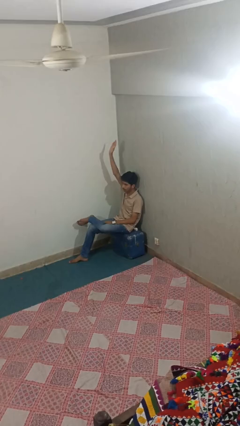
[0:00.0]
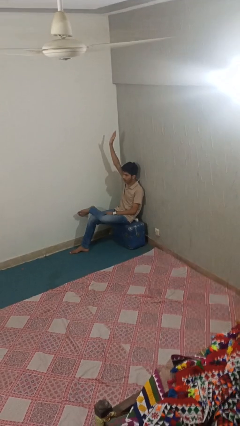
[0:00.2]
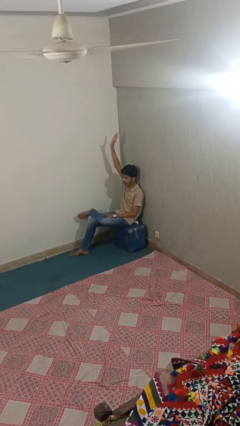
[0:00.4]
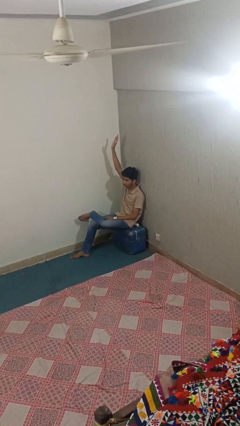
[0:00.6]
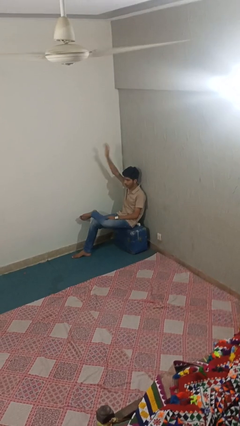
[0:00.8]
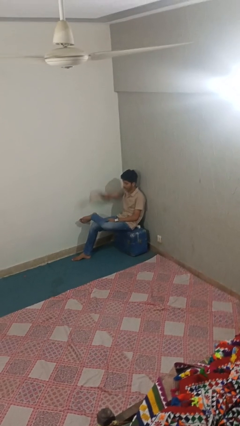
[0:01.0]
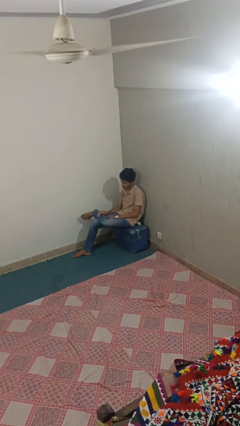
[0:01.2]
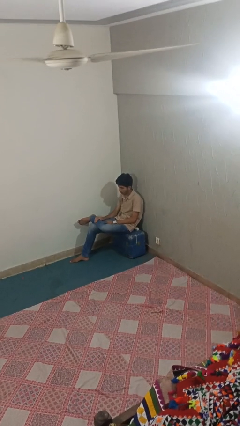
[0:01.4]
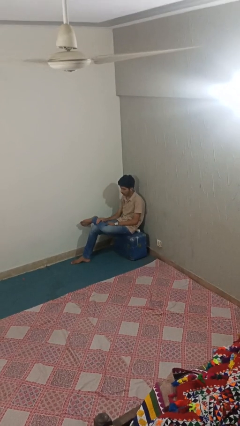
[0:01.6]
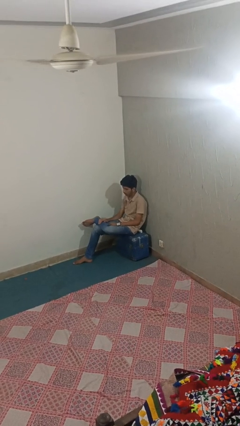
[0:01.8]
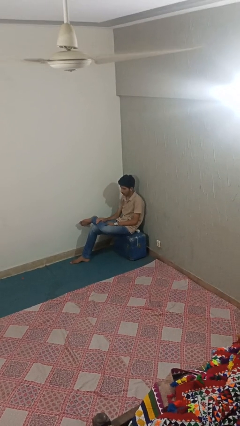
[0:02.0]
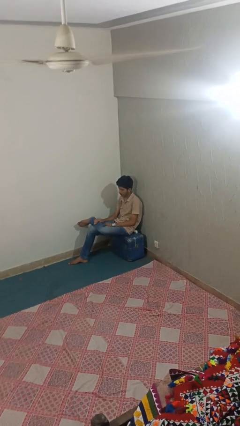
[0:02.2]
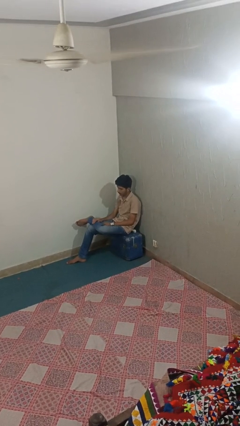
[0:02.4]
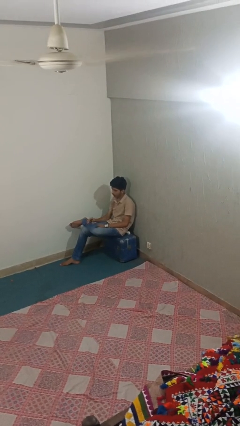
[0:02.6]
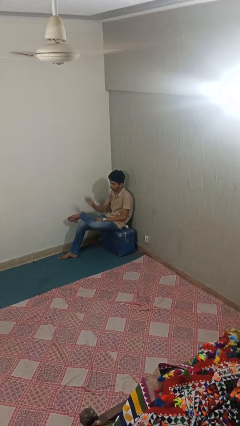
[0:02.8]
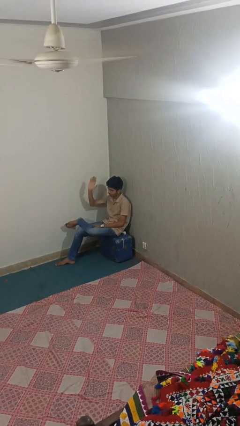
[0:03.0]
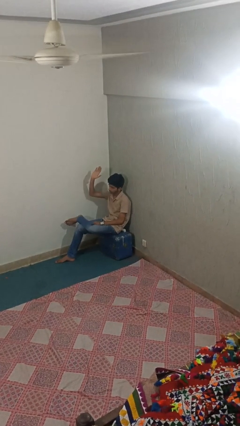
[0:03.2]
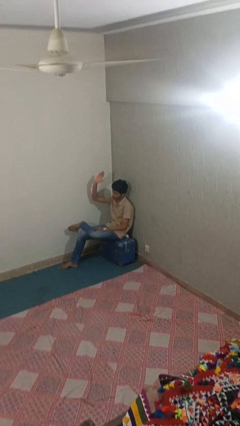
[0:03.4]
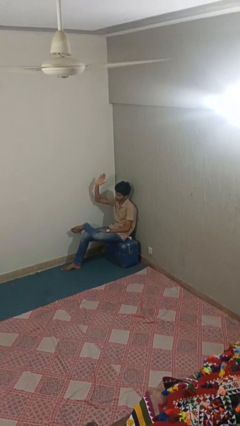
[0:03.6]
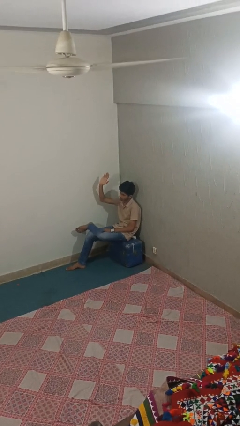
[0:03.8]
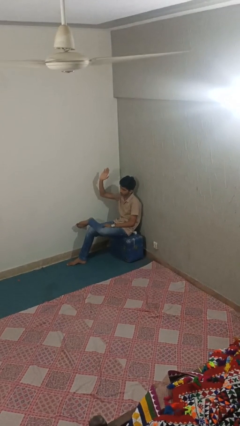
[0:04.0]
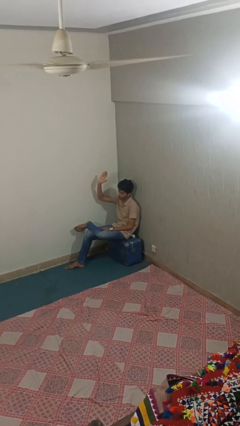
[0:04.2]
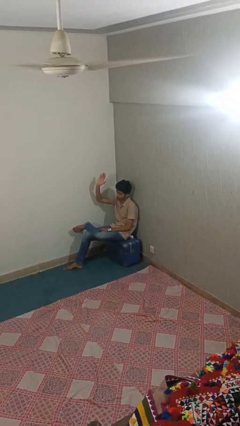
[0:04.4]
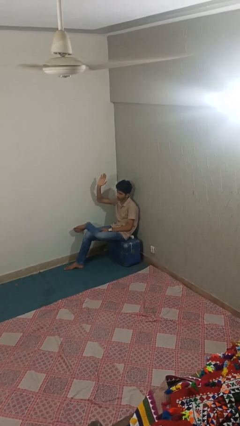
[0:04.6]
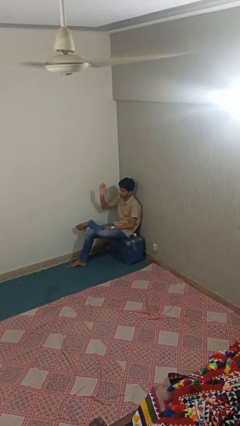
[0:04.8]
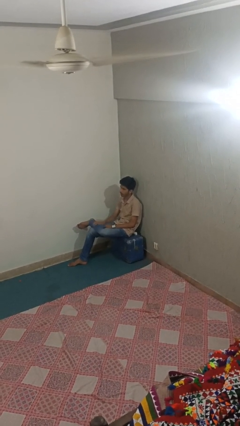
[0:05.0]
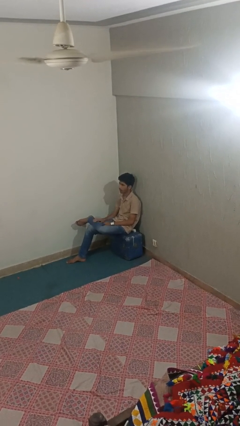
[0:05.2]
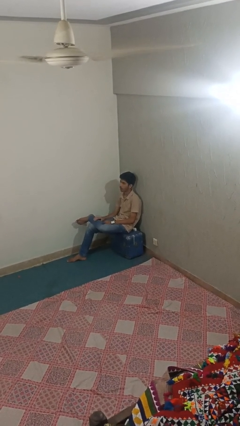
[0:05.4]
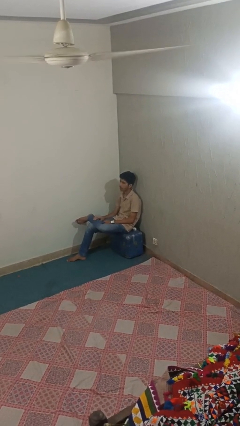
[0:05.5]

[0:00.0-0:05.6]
person gestures lower hand

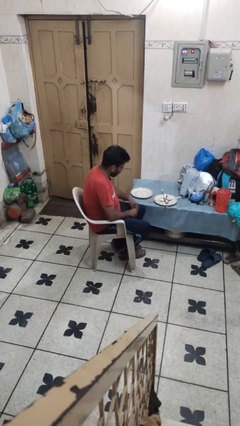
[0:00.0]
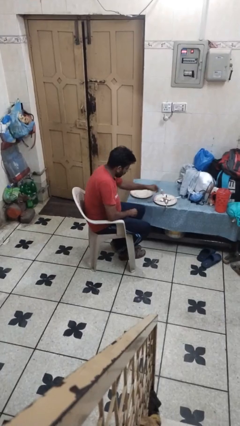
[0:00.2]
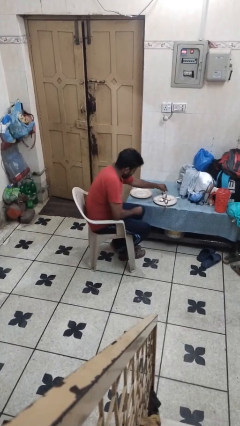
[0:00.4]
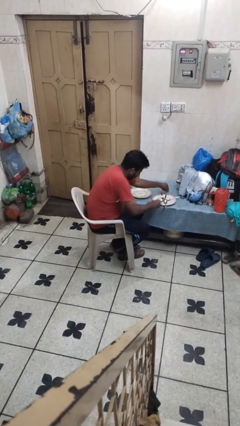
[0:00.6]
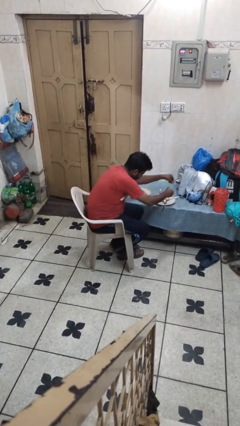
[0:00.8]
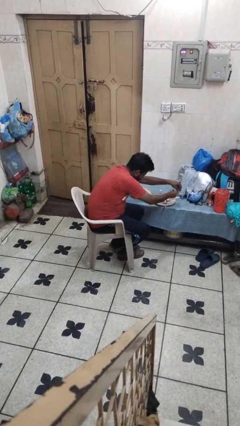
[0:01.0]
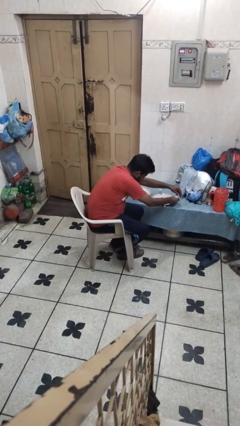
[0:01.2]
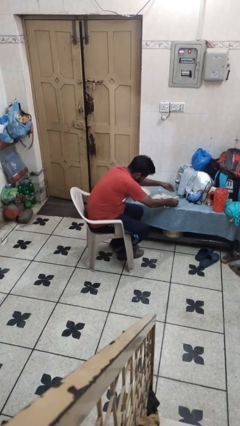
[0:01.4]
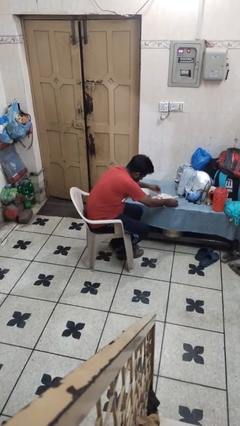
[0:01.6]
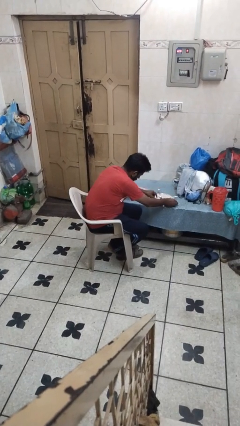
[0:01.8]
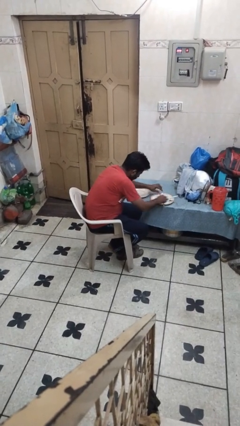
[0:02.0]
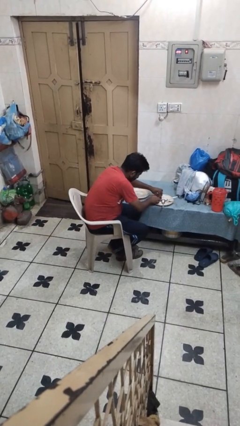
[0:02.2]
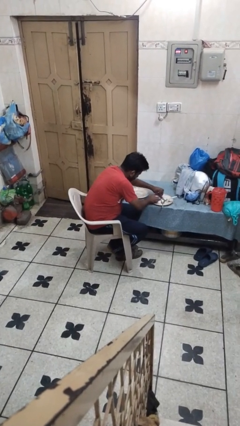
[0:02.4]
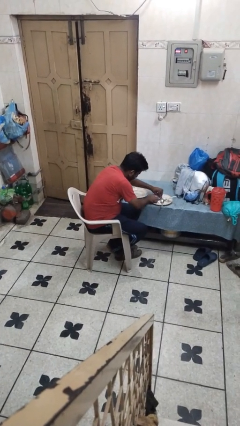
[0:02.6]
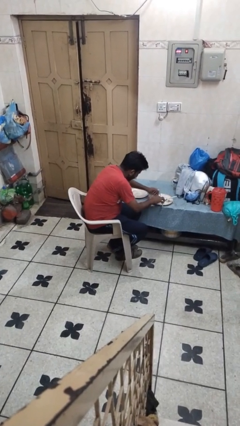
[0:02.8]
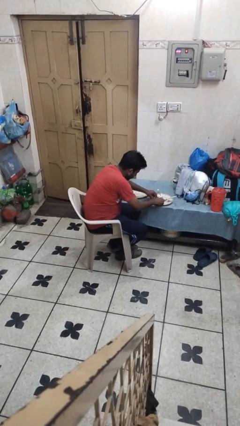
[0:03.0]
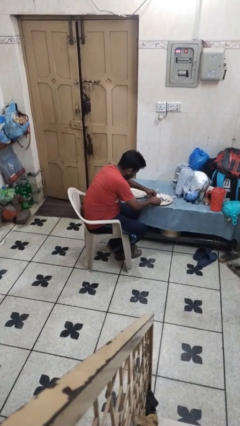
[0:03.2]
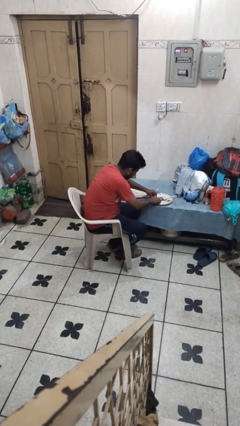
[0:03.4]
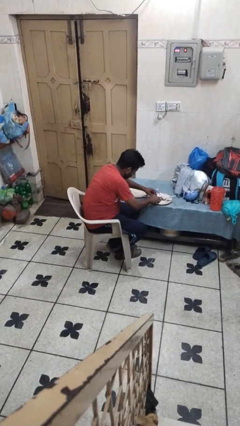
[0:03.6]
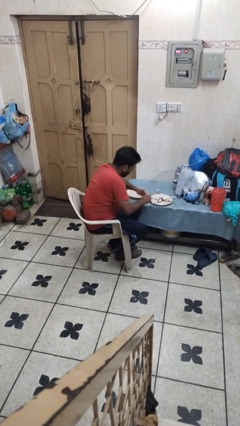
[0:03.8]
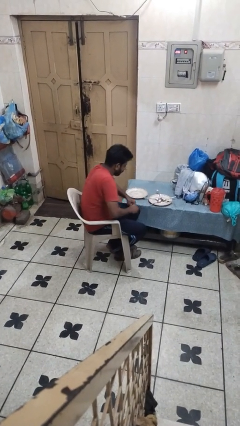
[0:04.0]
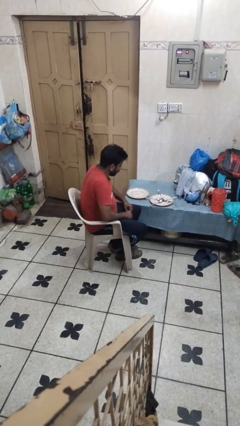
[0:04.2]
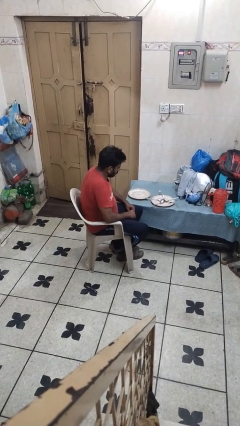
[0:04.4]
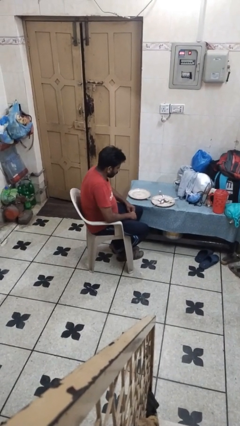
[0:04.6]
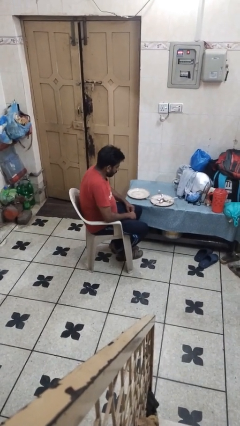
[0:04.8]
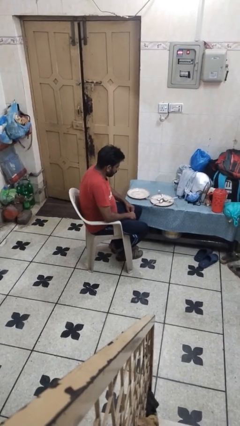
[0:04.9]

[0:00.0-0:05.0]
person sets table

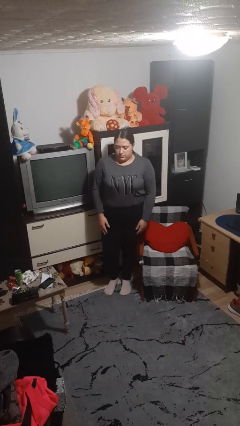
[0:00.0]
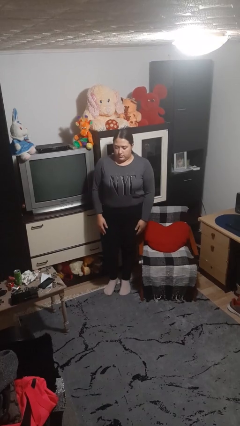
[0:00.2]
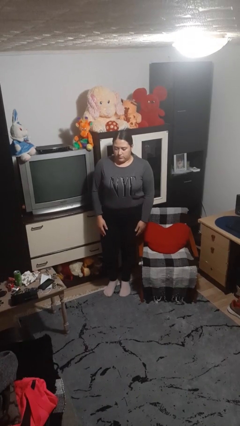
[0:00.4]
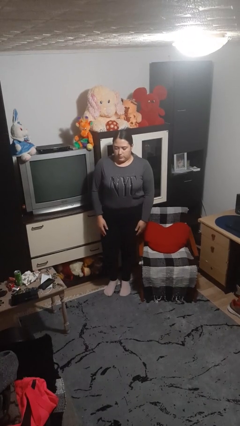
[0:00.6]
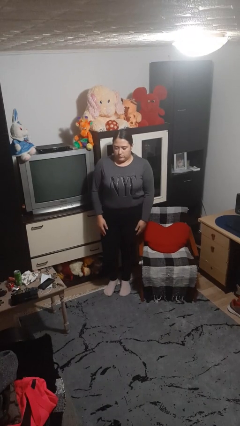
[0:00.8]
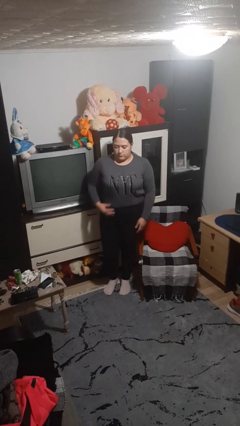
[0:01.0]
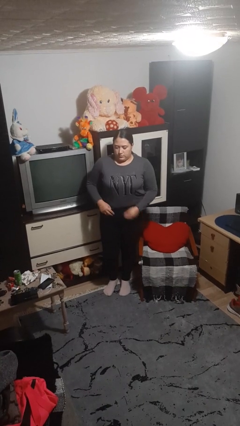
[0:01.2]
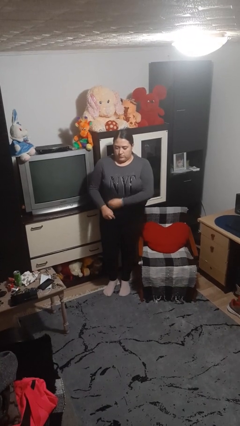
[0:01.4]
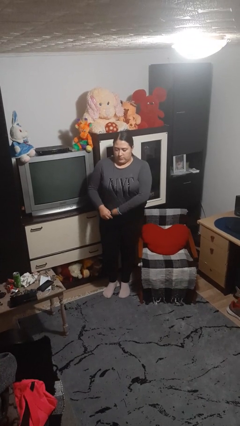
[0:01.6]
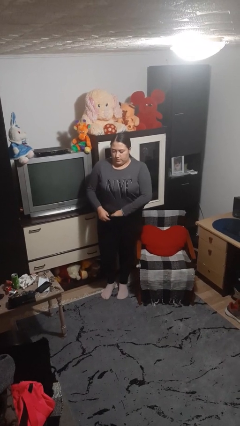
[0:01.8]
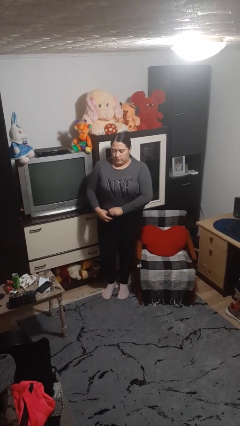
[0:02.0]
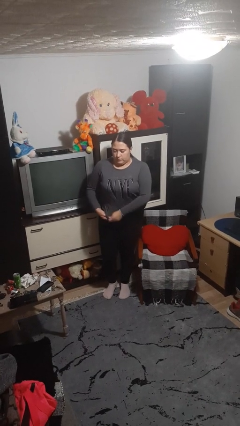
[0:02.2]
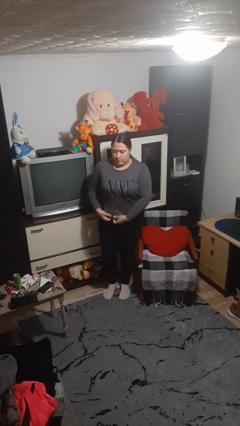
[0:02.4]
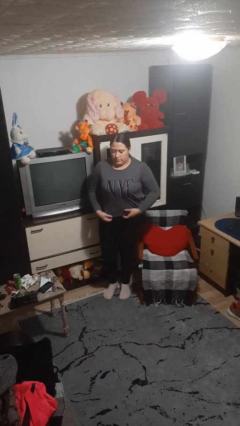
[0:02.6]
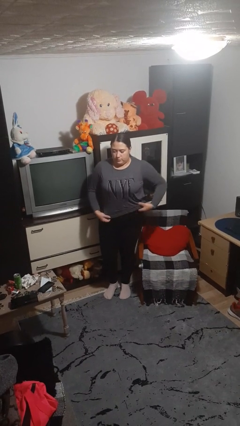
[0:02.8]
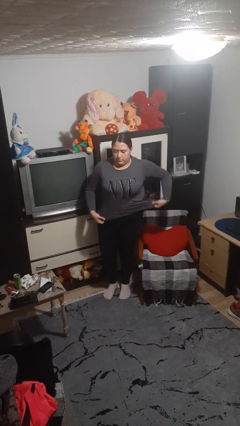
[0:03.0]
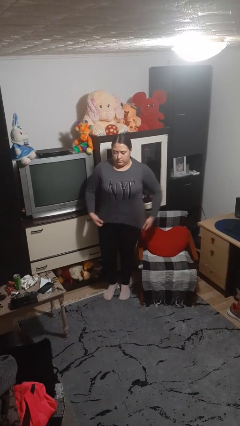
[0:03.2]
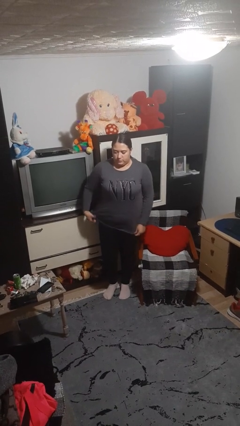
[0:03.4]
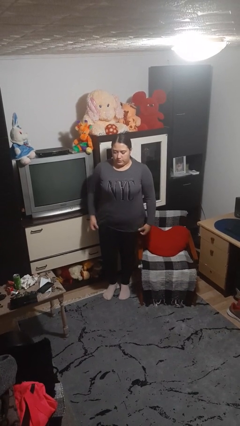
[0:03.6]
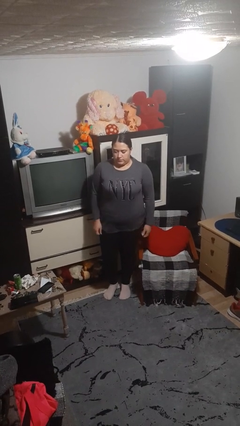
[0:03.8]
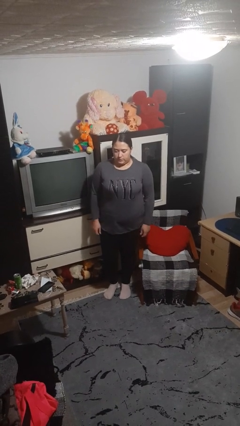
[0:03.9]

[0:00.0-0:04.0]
person untucks shirt

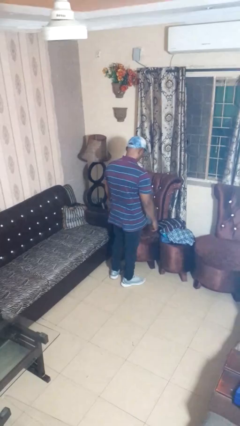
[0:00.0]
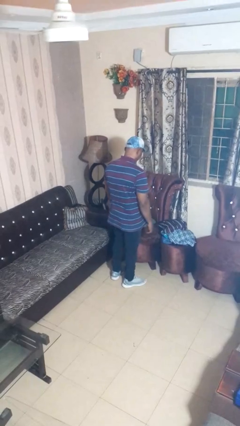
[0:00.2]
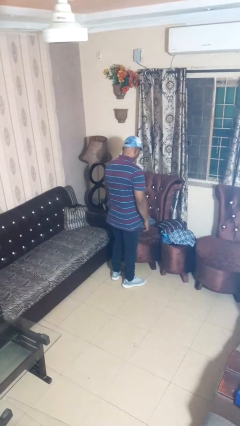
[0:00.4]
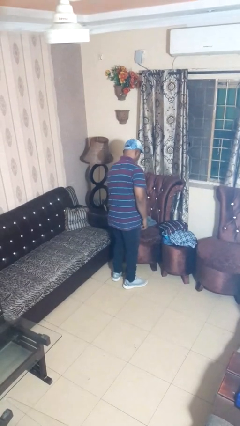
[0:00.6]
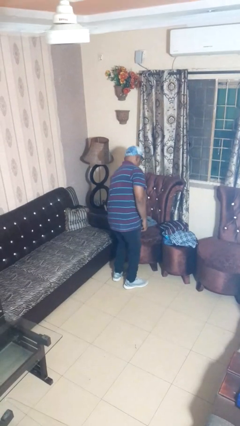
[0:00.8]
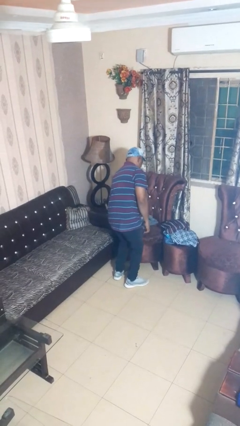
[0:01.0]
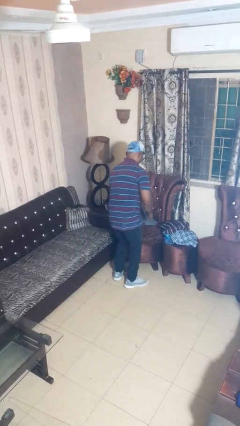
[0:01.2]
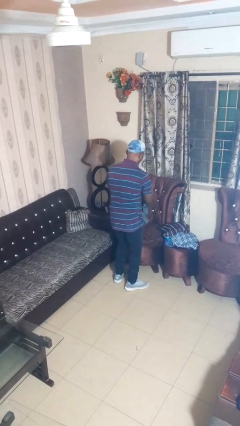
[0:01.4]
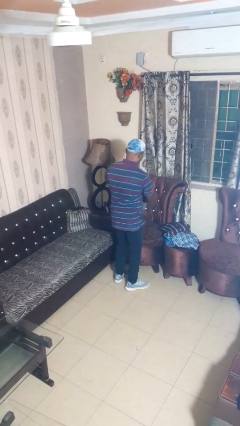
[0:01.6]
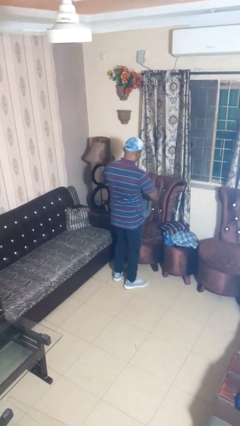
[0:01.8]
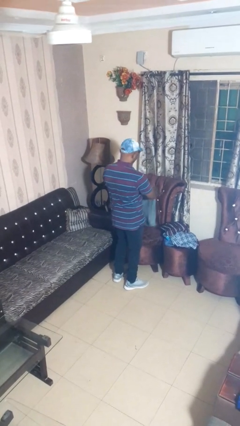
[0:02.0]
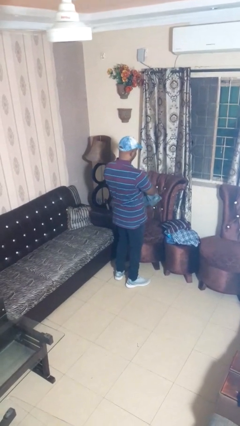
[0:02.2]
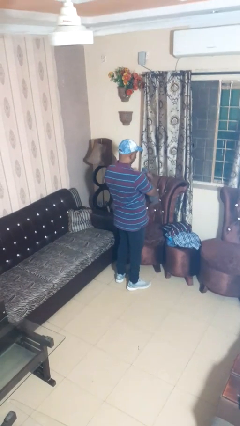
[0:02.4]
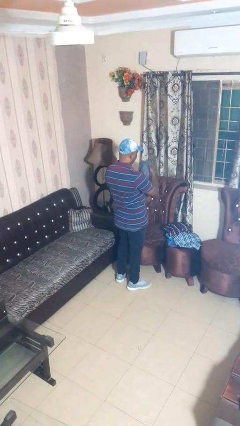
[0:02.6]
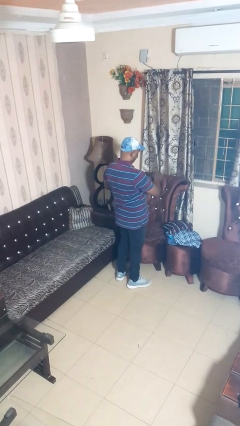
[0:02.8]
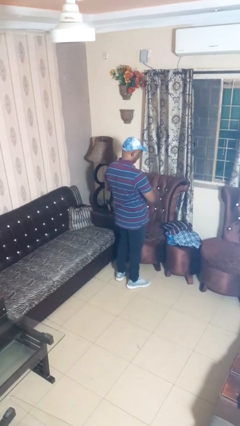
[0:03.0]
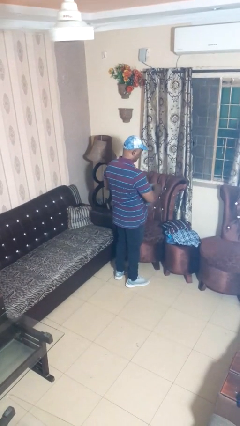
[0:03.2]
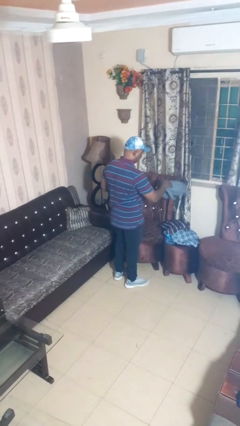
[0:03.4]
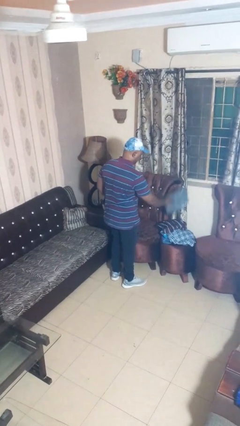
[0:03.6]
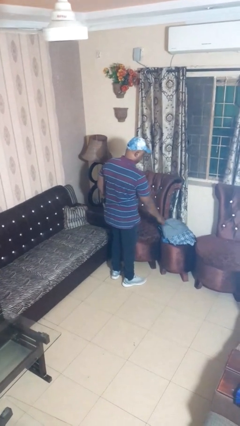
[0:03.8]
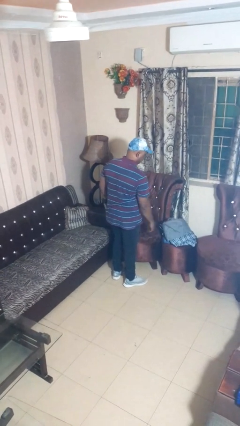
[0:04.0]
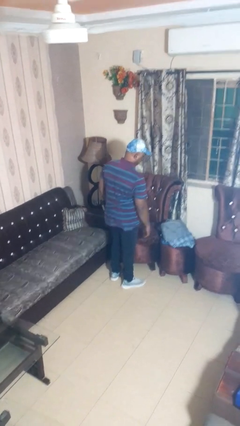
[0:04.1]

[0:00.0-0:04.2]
person folds pants
